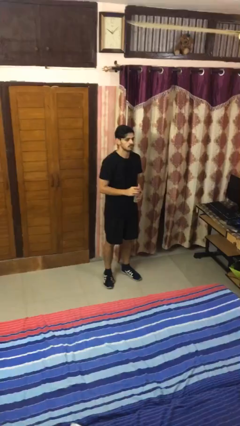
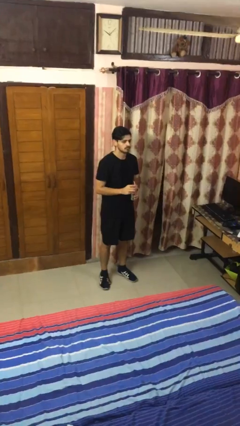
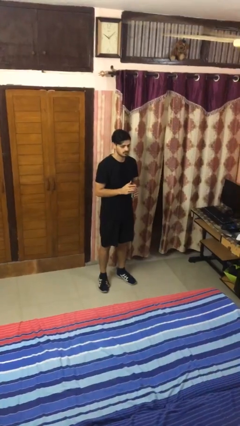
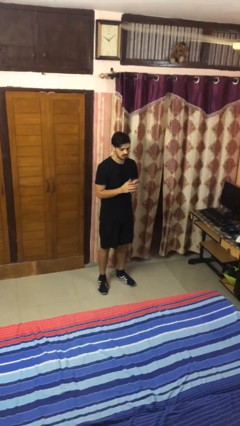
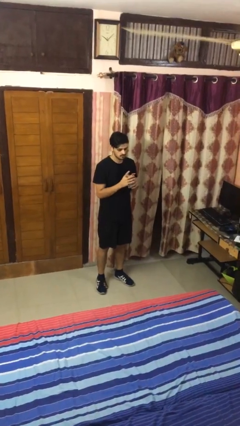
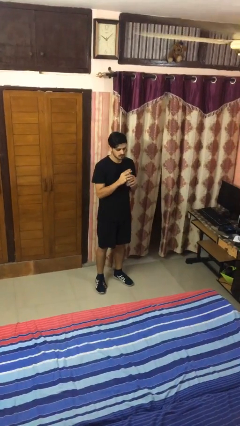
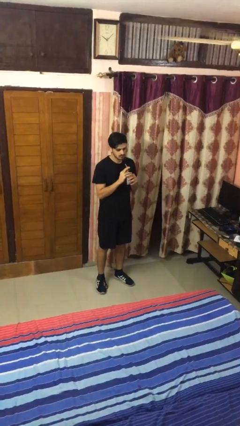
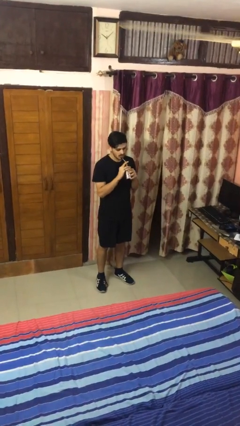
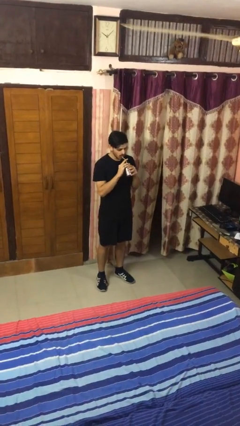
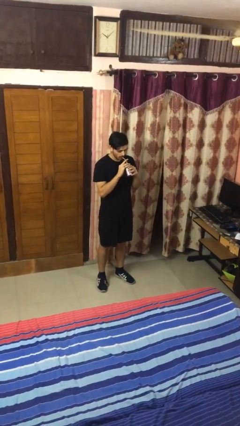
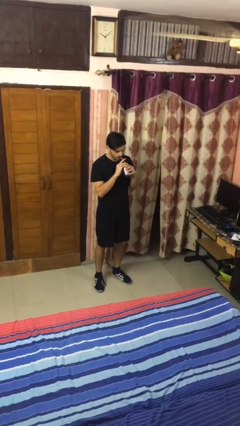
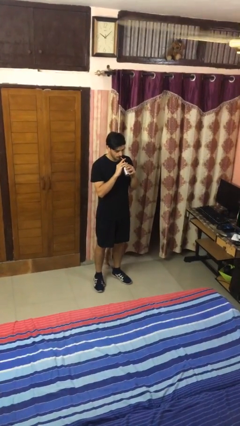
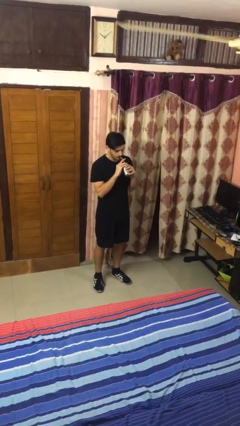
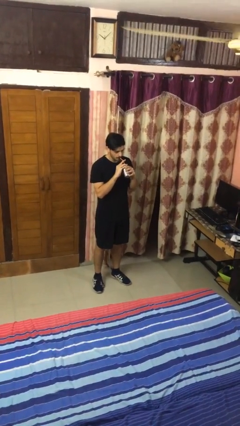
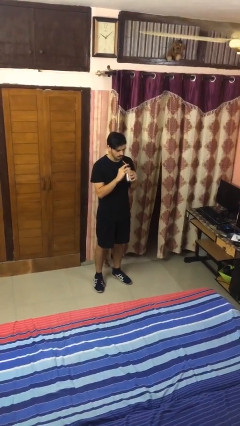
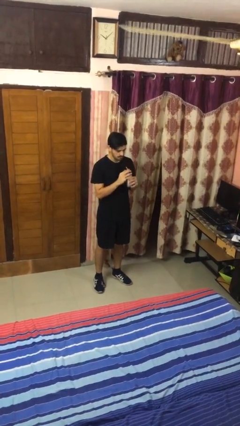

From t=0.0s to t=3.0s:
person drinks from straw

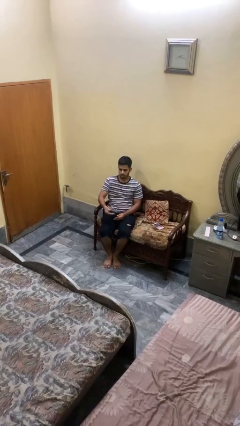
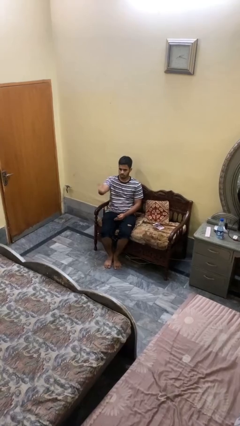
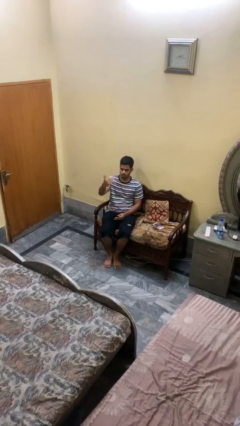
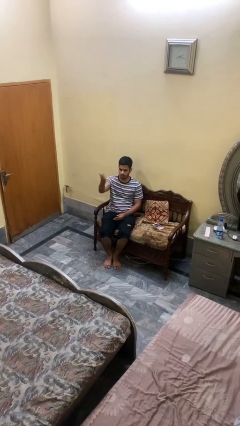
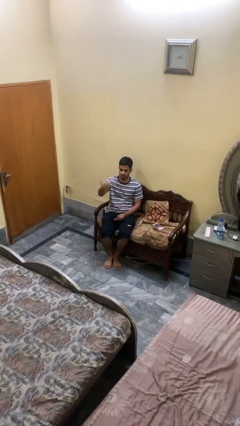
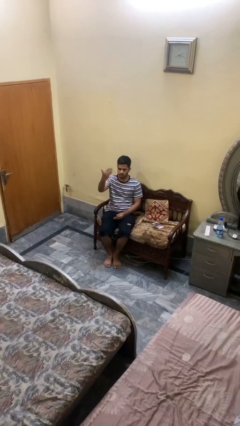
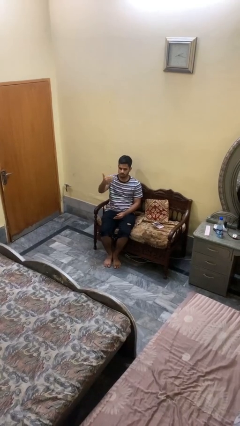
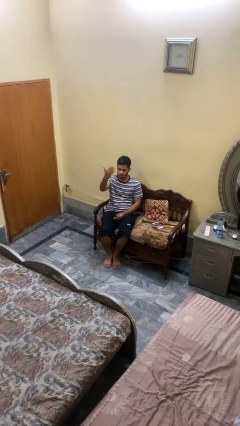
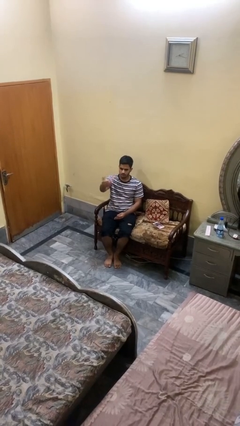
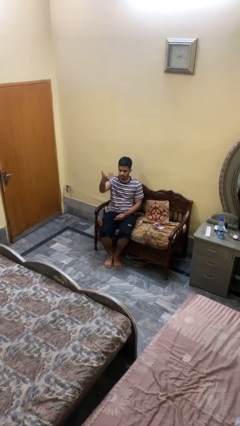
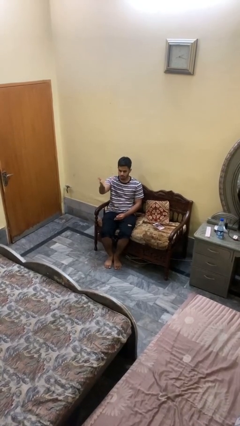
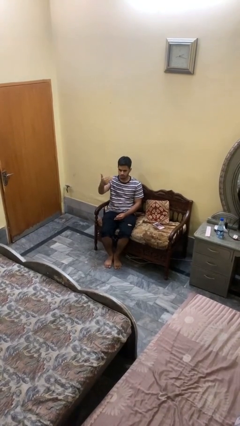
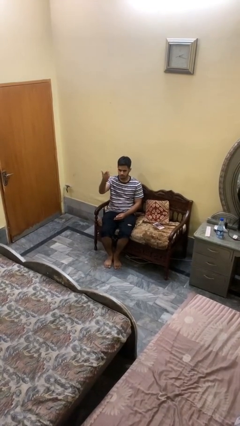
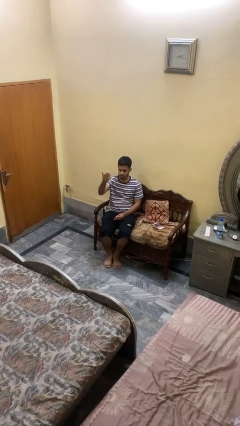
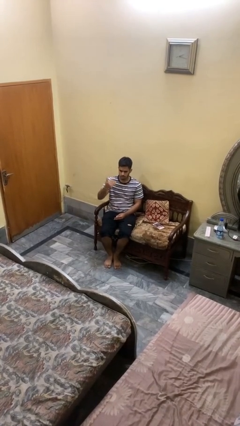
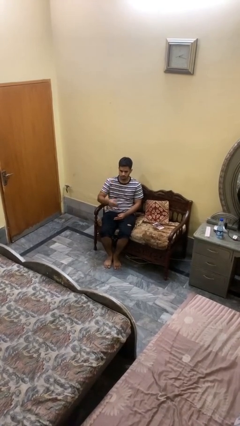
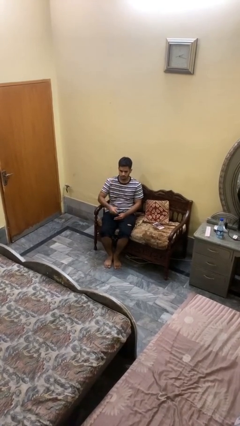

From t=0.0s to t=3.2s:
person gestures come here

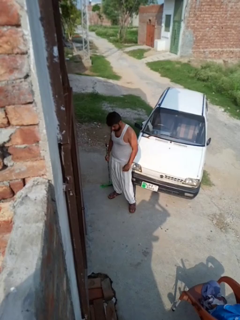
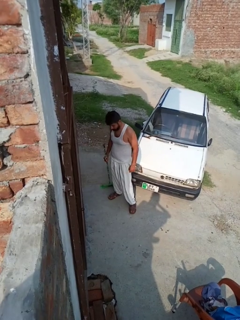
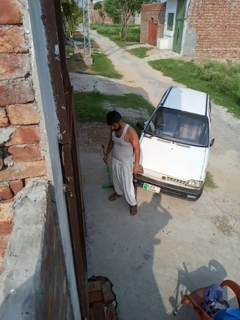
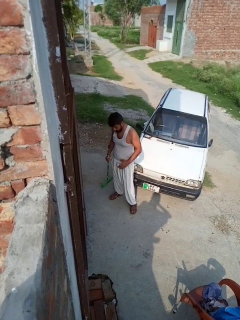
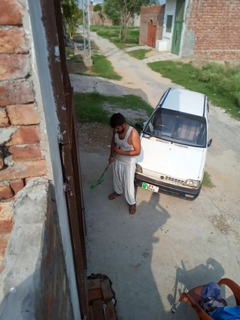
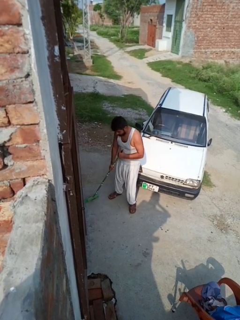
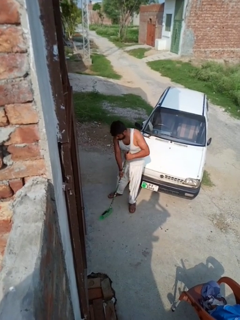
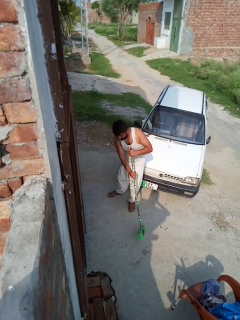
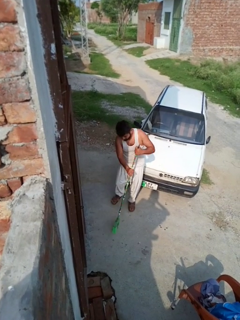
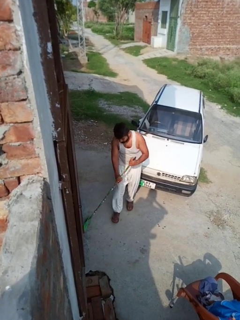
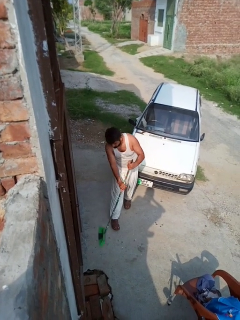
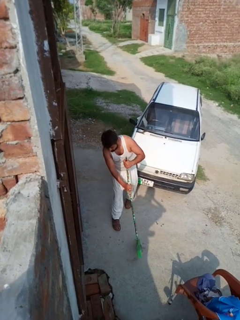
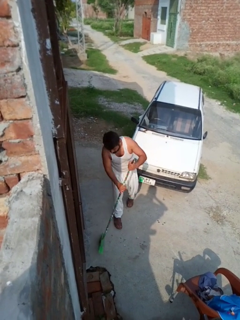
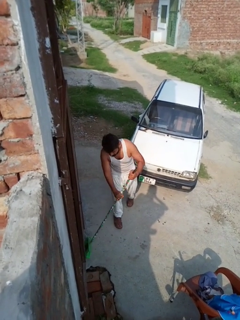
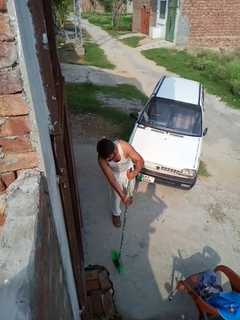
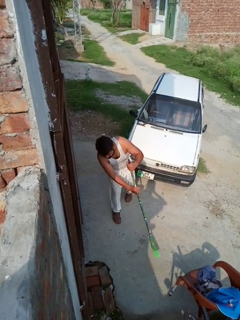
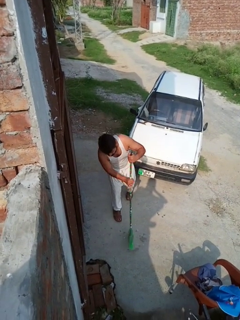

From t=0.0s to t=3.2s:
person sweeps floor

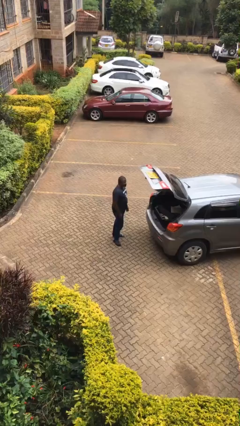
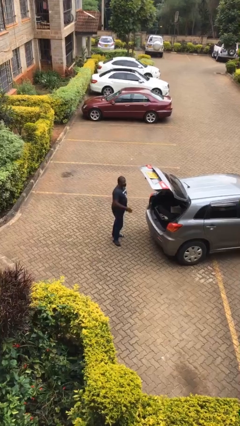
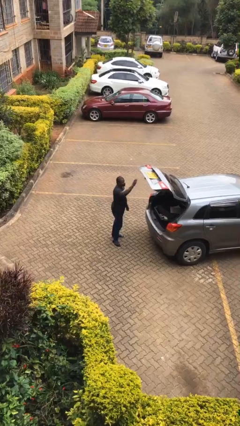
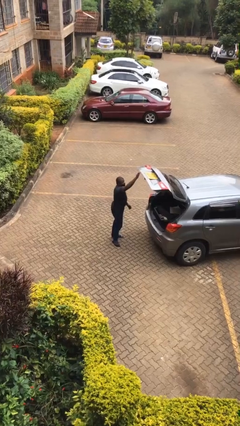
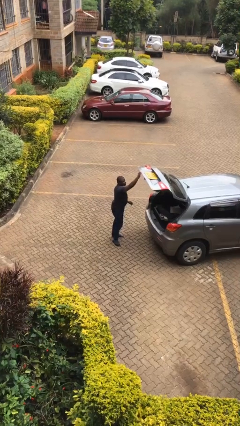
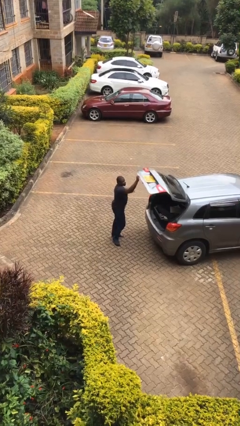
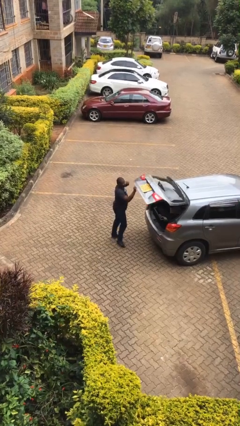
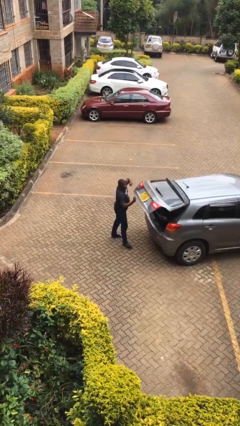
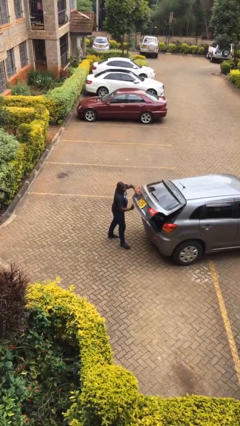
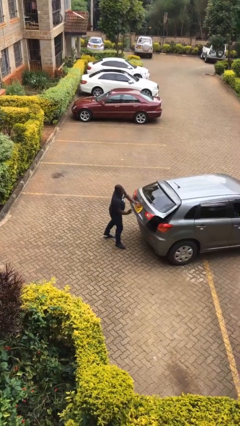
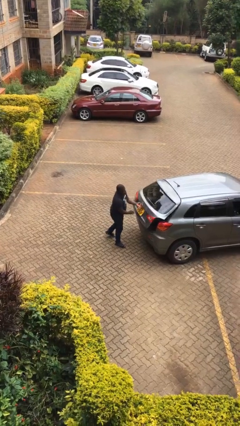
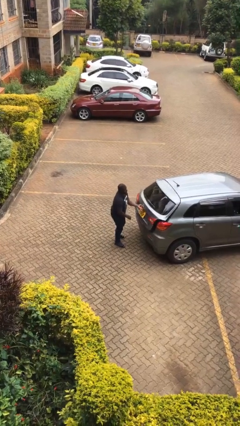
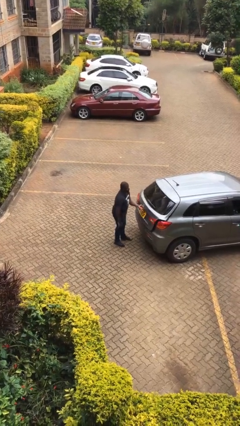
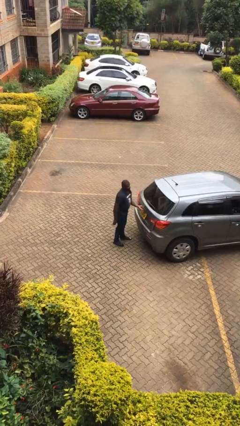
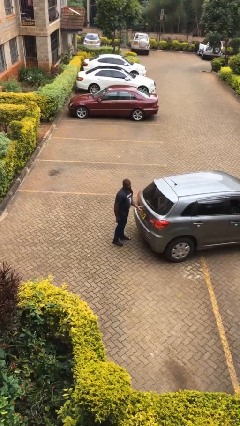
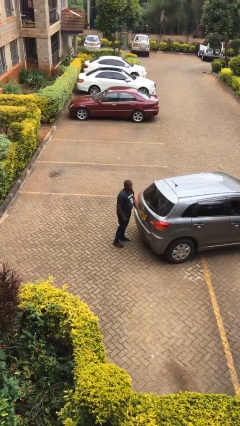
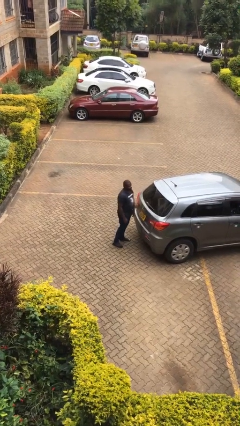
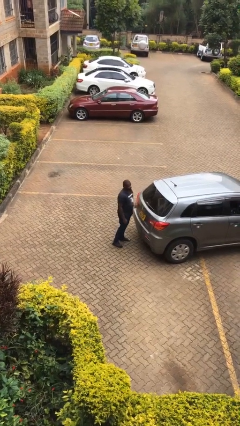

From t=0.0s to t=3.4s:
person closes car trunk

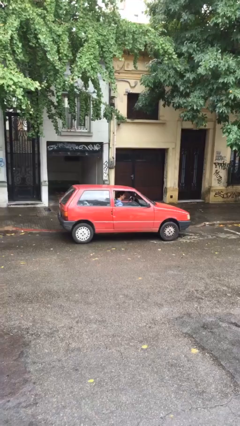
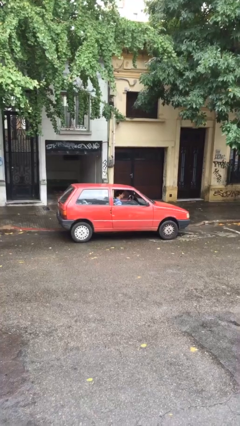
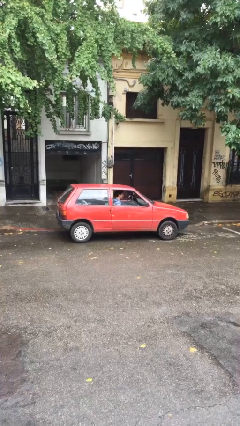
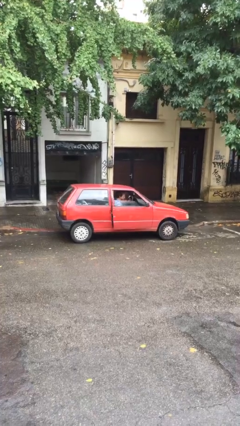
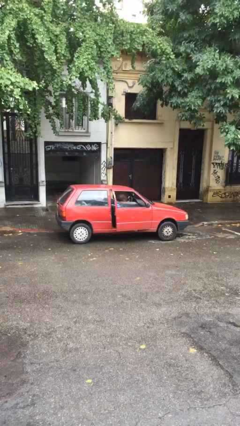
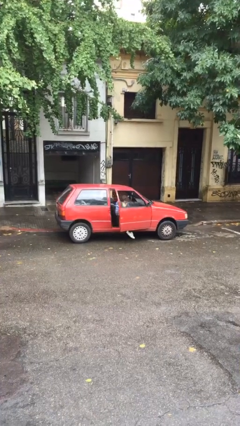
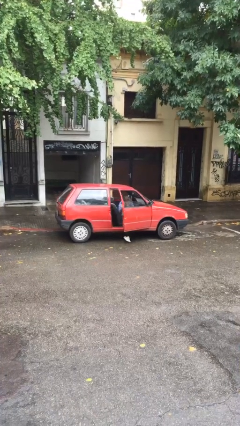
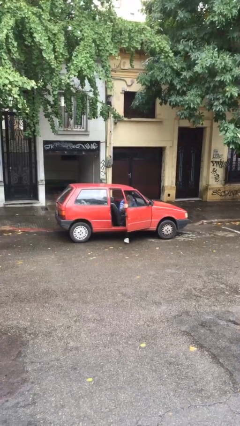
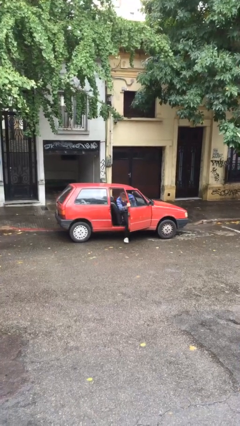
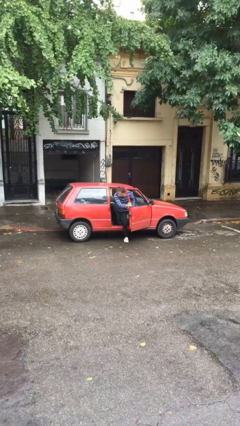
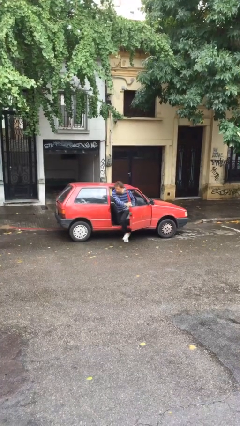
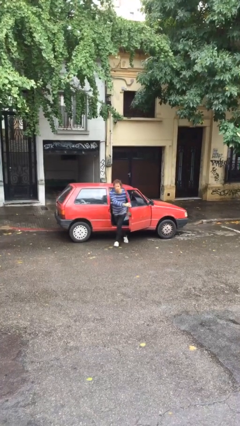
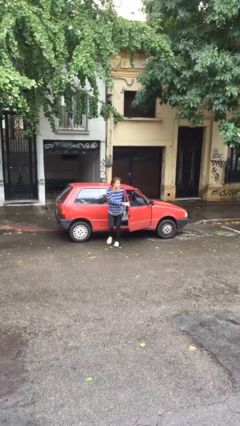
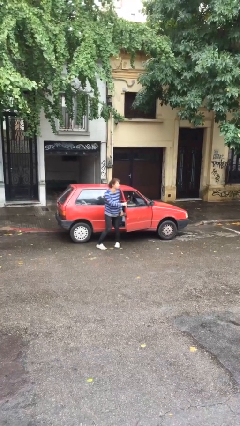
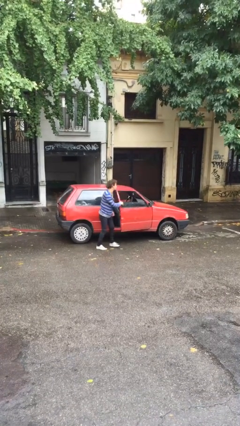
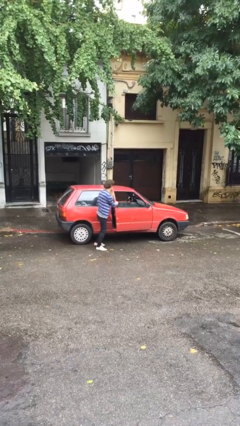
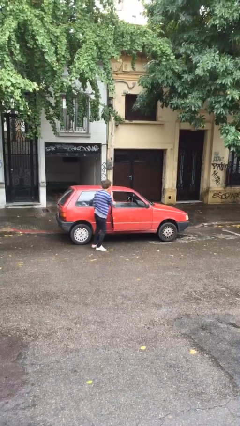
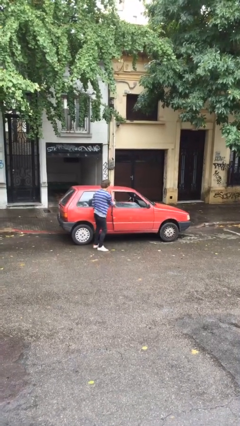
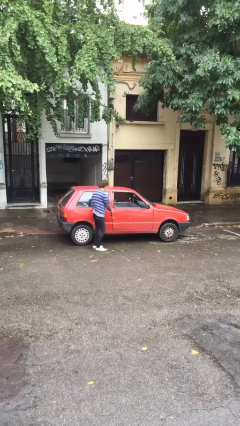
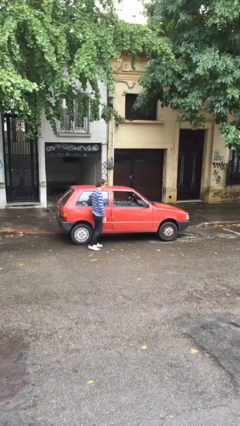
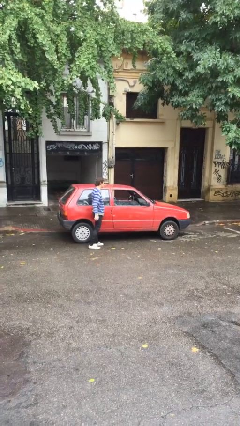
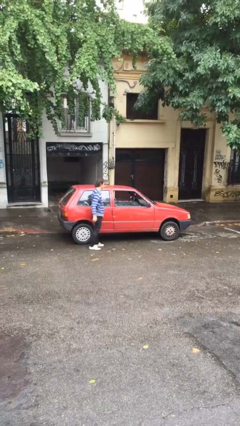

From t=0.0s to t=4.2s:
car drops off person

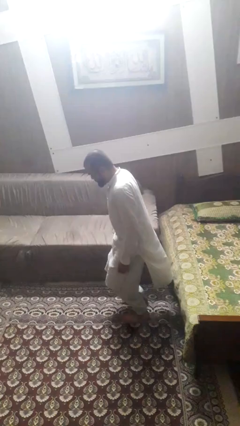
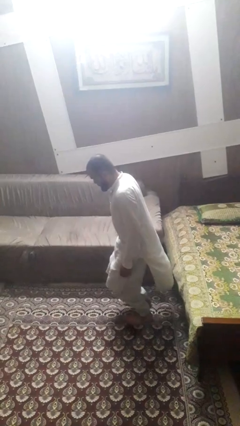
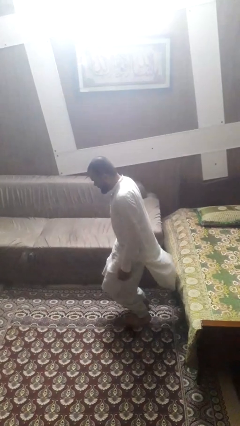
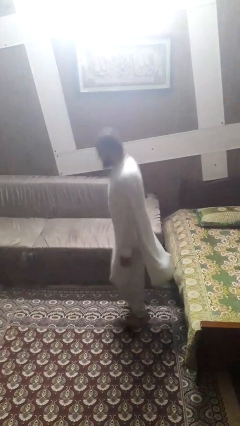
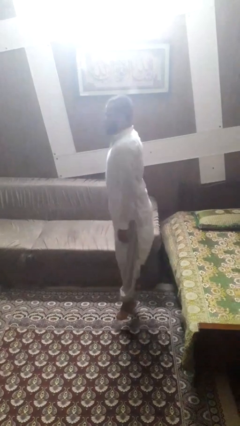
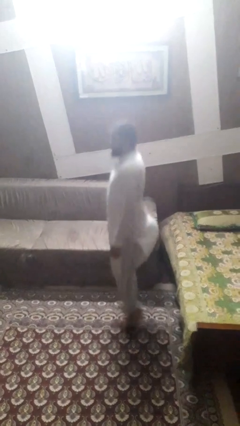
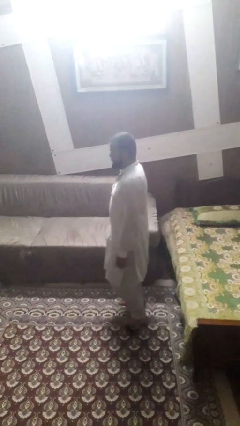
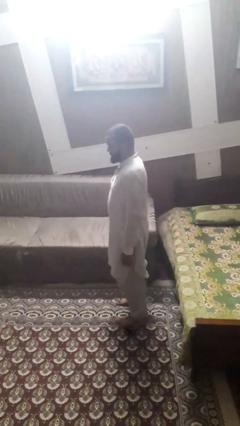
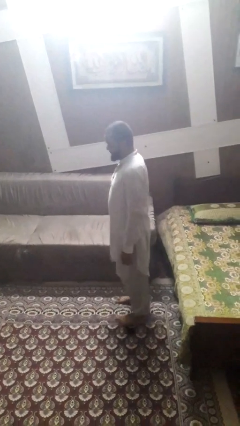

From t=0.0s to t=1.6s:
person jumps
